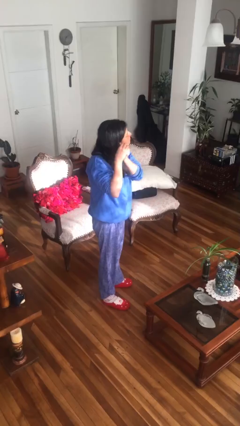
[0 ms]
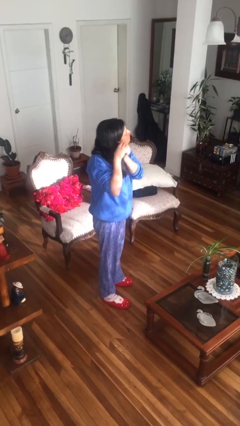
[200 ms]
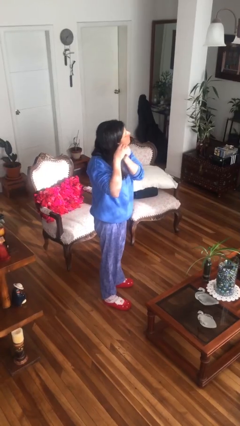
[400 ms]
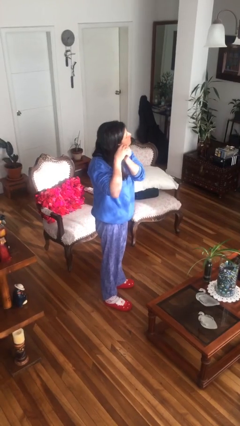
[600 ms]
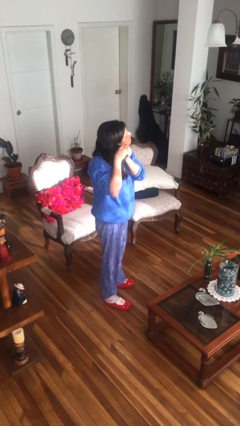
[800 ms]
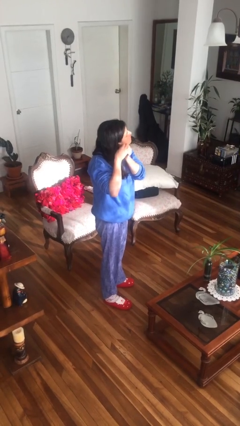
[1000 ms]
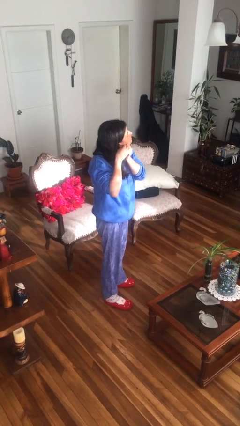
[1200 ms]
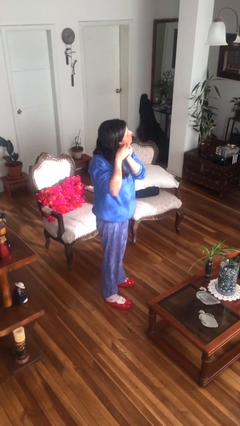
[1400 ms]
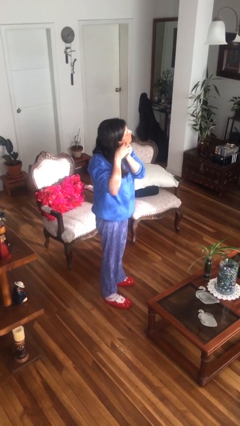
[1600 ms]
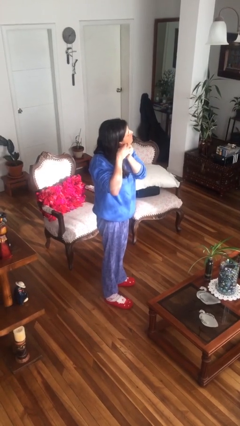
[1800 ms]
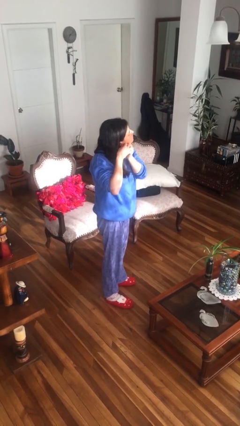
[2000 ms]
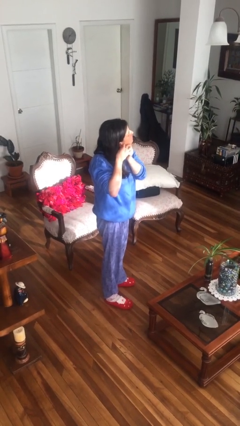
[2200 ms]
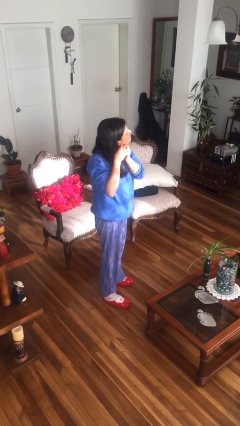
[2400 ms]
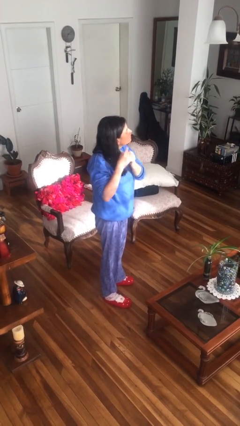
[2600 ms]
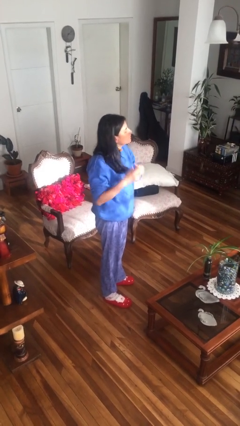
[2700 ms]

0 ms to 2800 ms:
person puts on earrings

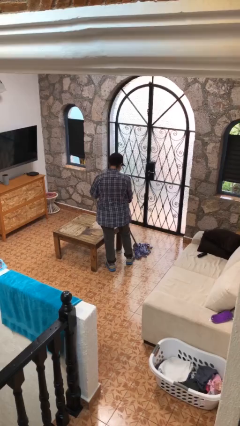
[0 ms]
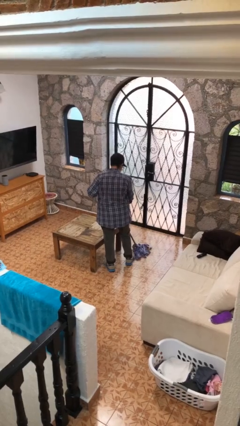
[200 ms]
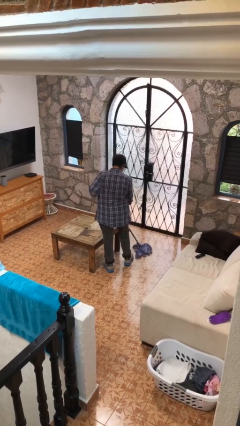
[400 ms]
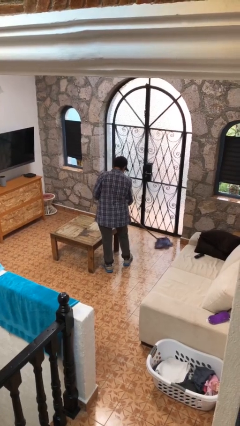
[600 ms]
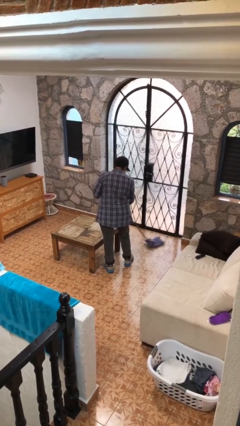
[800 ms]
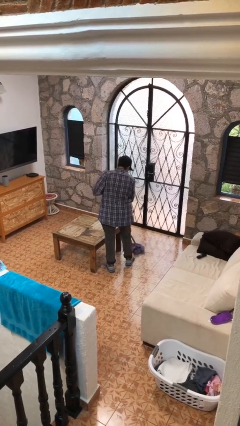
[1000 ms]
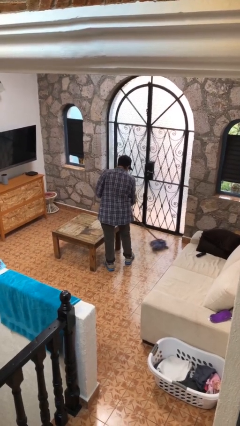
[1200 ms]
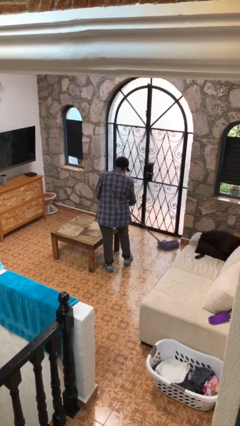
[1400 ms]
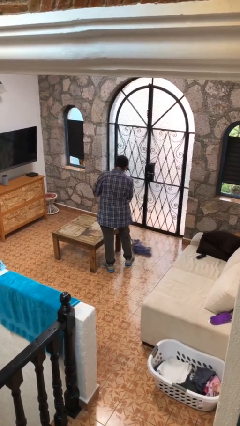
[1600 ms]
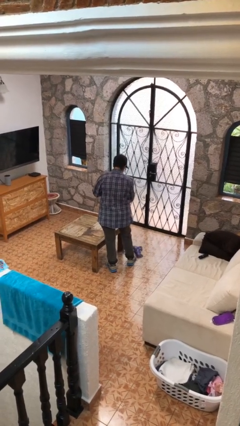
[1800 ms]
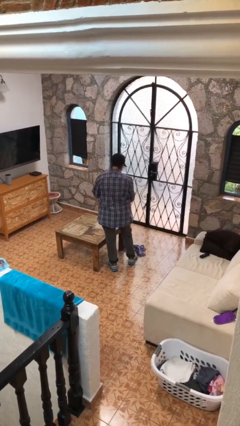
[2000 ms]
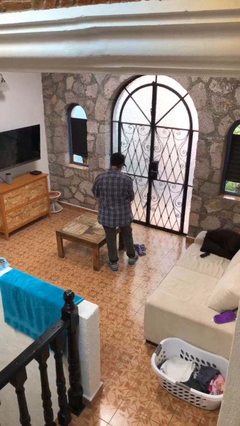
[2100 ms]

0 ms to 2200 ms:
person mops

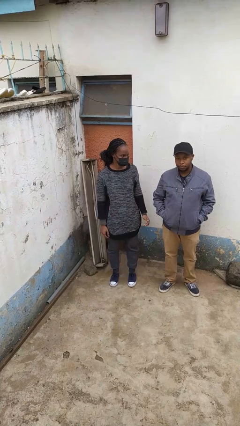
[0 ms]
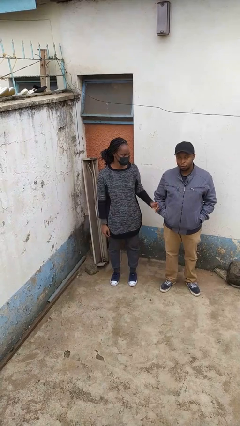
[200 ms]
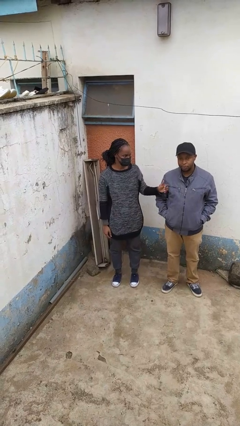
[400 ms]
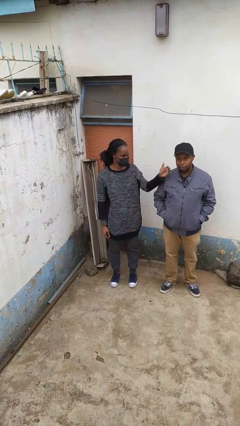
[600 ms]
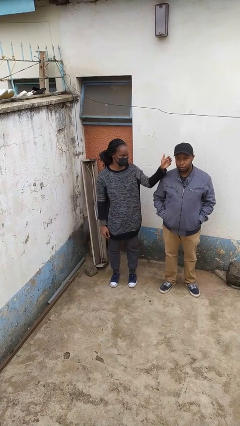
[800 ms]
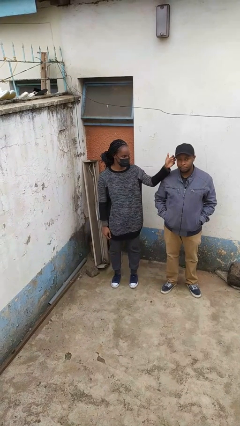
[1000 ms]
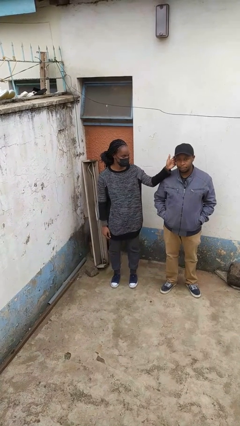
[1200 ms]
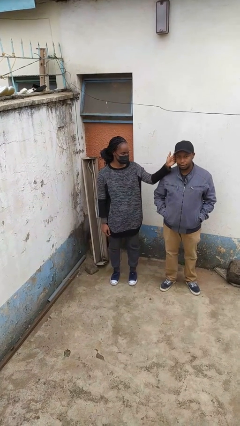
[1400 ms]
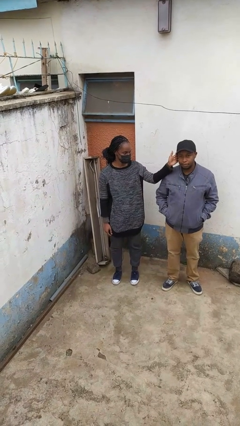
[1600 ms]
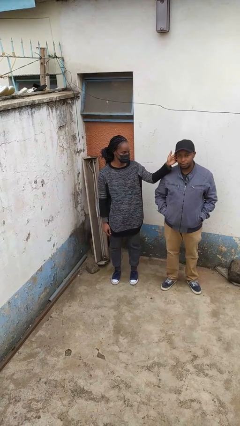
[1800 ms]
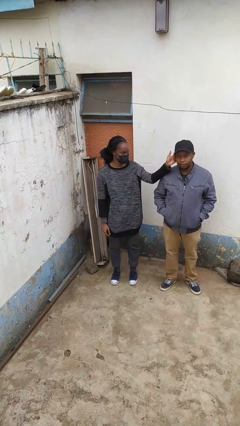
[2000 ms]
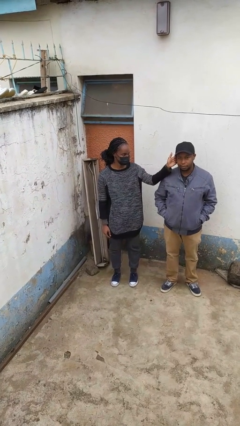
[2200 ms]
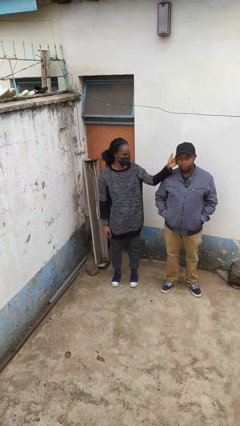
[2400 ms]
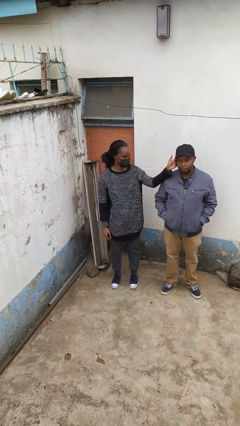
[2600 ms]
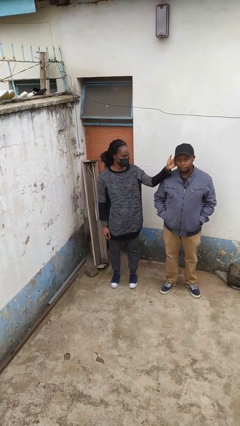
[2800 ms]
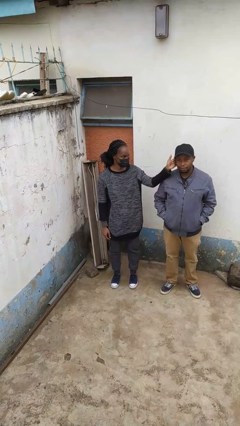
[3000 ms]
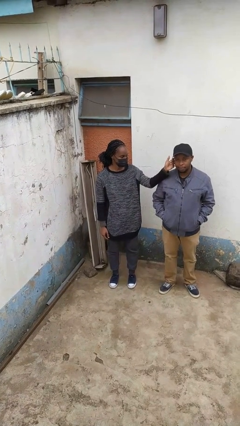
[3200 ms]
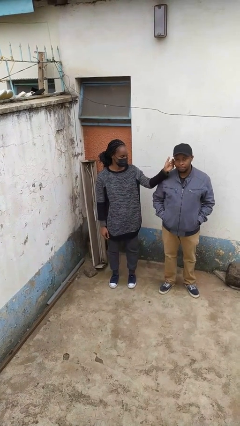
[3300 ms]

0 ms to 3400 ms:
person touches face of person

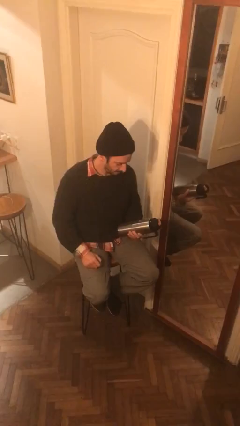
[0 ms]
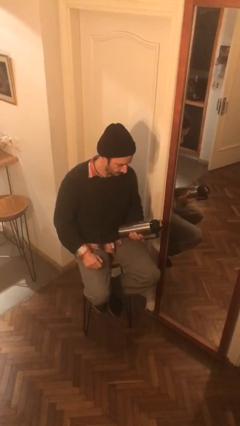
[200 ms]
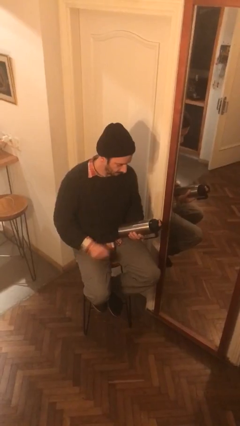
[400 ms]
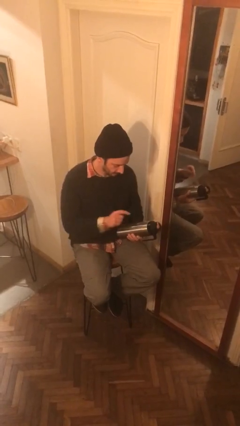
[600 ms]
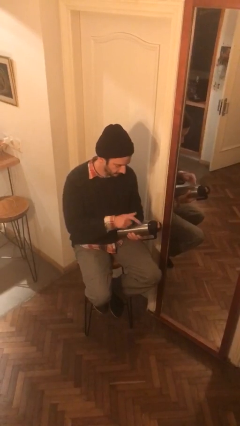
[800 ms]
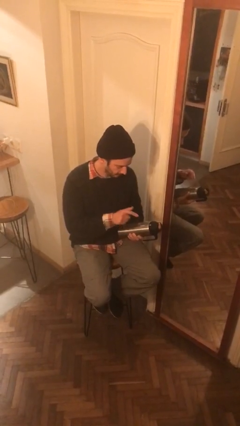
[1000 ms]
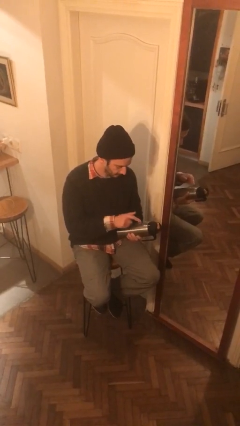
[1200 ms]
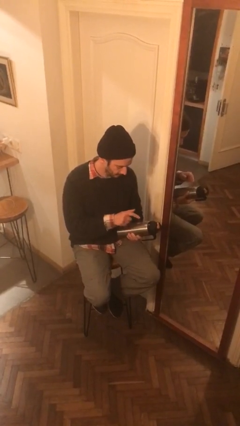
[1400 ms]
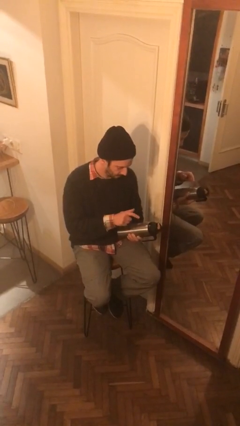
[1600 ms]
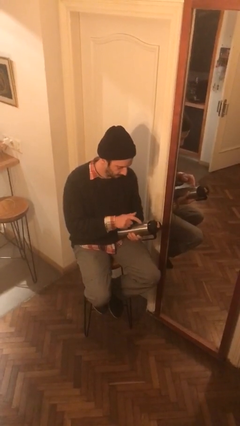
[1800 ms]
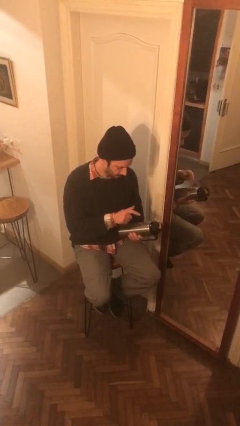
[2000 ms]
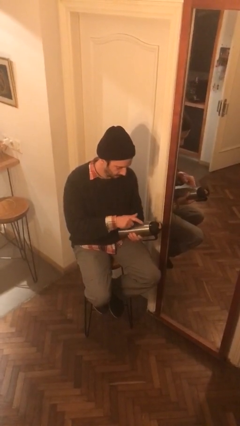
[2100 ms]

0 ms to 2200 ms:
person taps object with finger

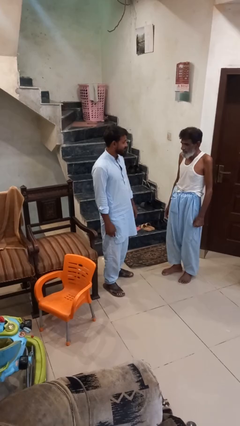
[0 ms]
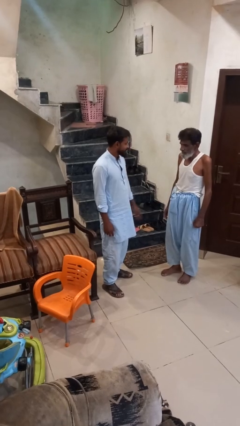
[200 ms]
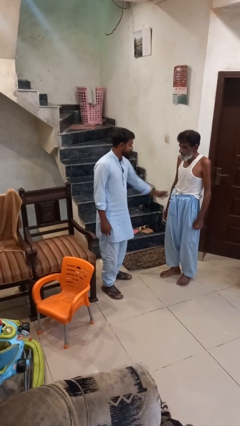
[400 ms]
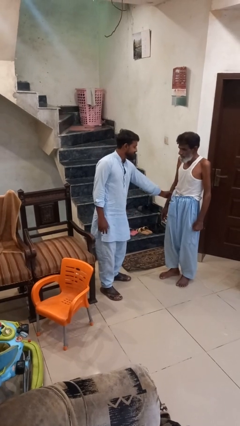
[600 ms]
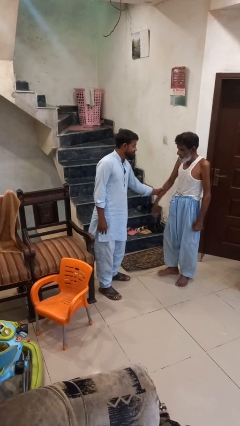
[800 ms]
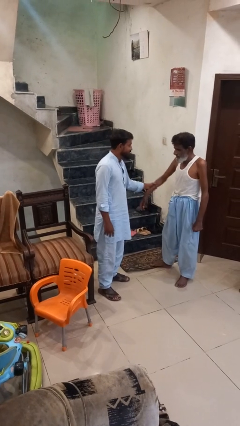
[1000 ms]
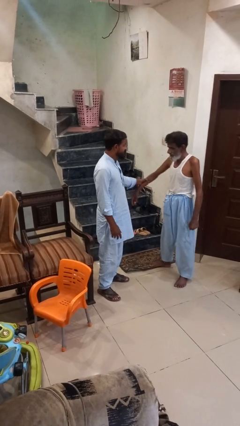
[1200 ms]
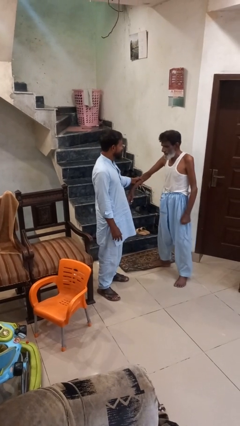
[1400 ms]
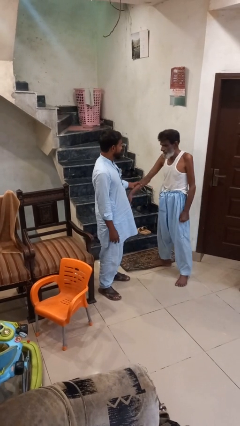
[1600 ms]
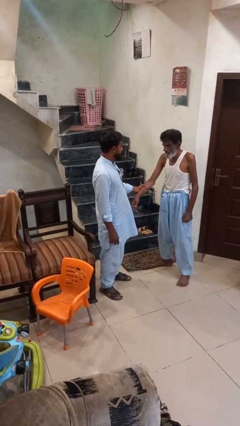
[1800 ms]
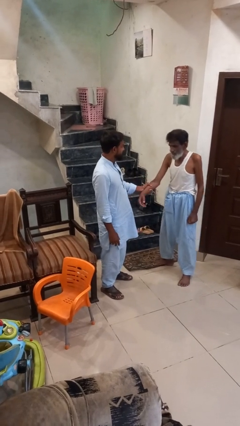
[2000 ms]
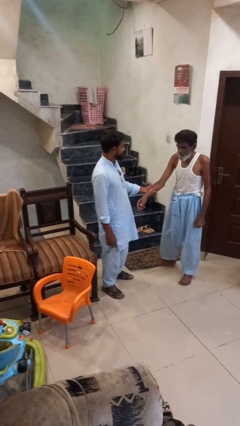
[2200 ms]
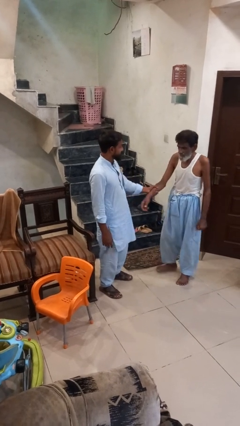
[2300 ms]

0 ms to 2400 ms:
person grabs person by forearm

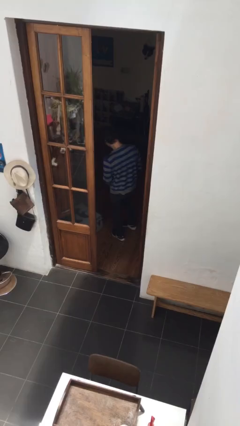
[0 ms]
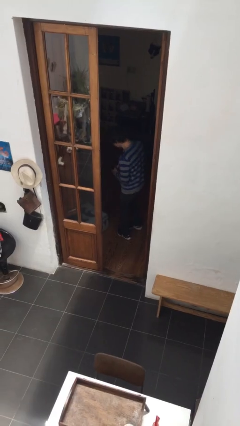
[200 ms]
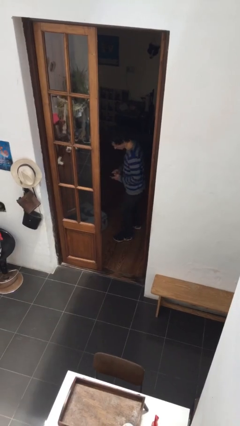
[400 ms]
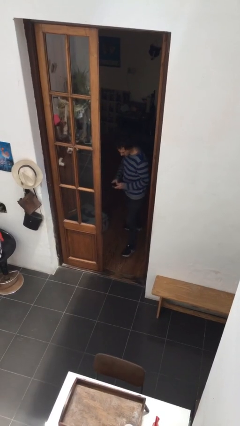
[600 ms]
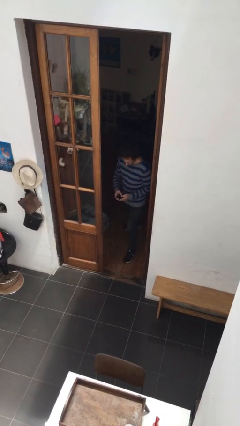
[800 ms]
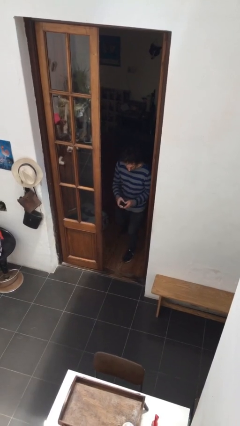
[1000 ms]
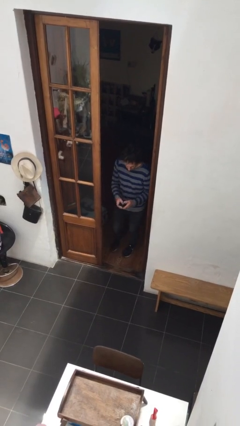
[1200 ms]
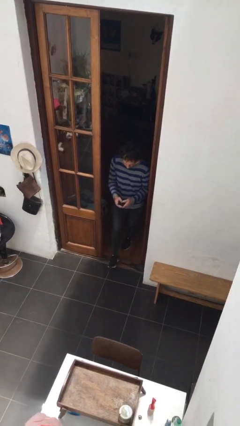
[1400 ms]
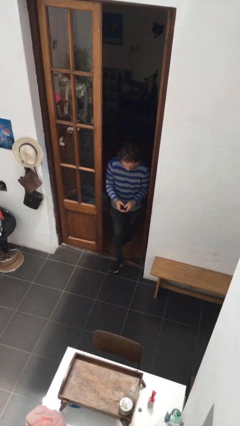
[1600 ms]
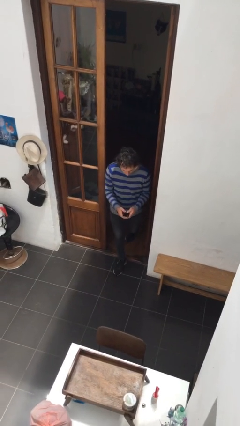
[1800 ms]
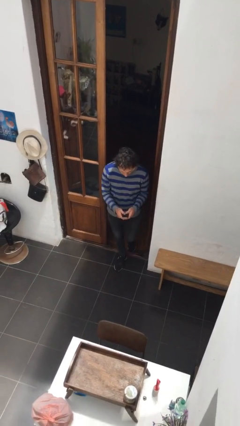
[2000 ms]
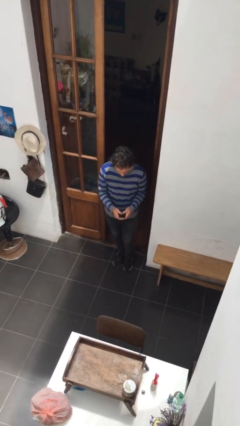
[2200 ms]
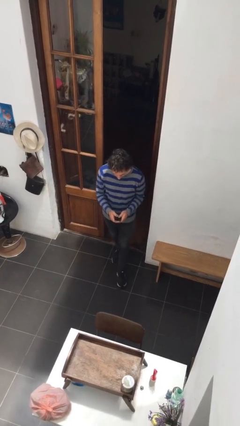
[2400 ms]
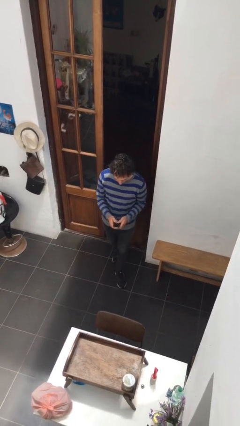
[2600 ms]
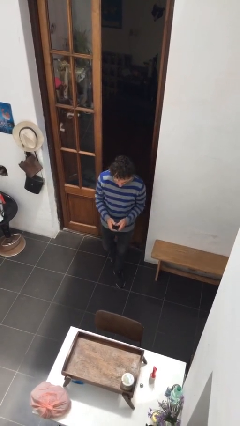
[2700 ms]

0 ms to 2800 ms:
person enters scene through structure

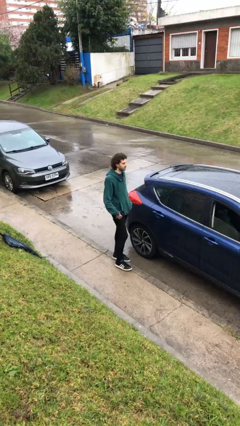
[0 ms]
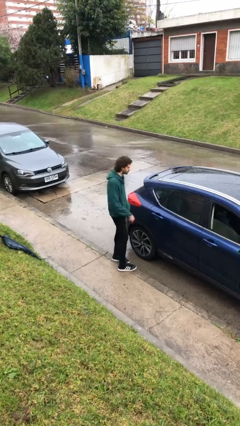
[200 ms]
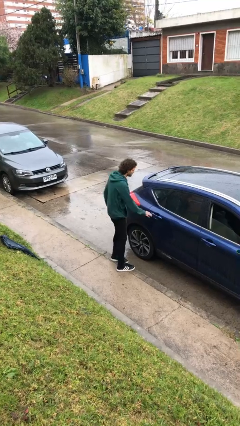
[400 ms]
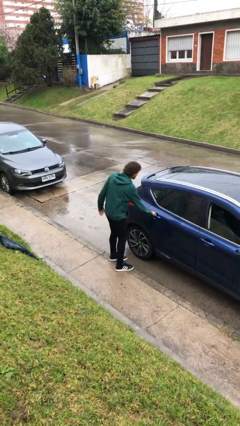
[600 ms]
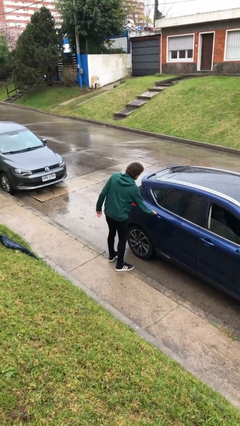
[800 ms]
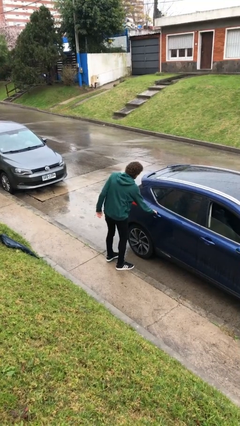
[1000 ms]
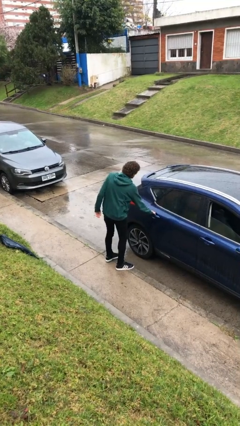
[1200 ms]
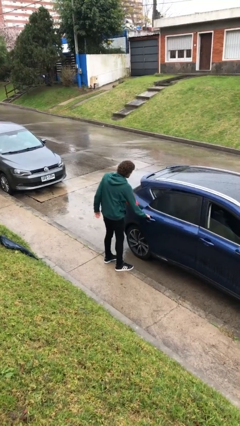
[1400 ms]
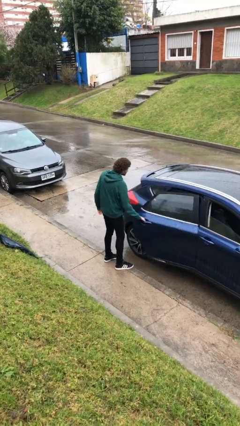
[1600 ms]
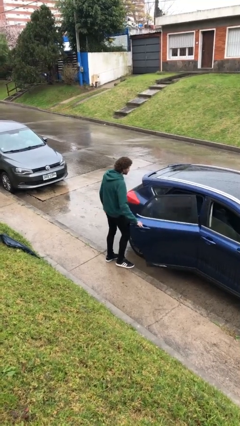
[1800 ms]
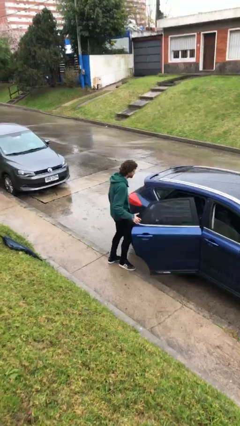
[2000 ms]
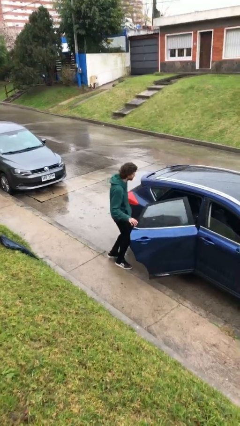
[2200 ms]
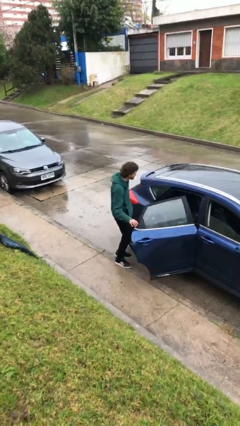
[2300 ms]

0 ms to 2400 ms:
person opens car door
